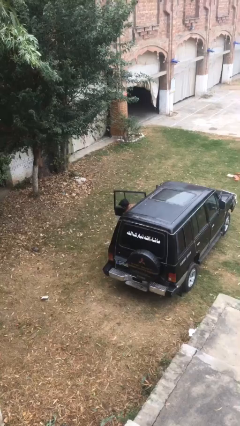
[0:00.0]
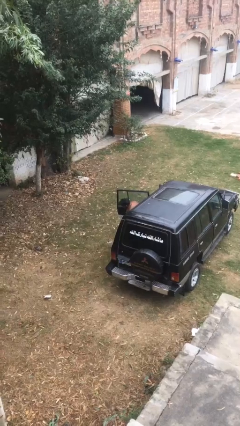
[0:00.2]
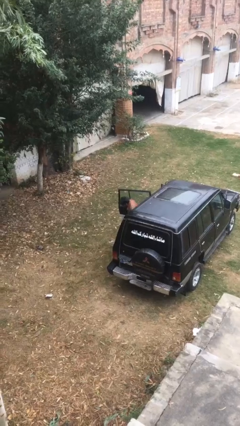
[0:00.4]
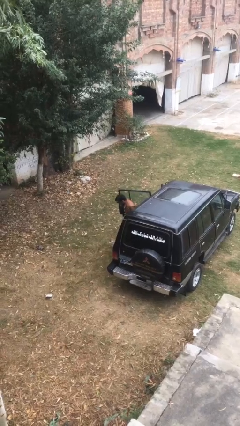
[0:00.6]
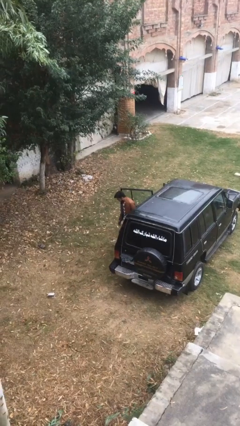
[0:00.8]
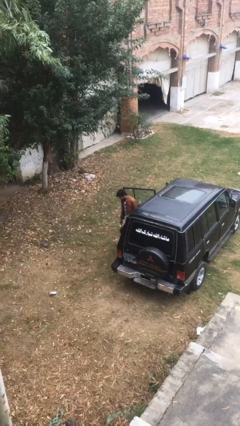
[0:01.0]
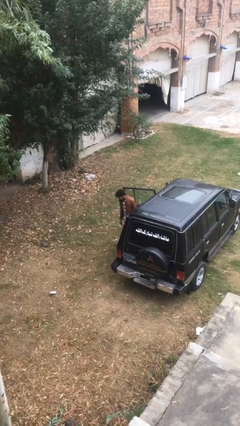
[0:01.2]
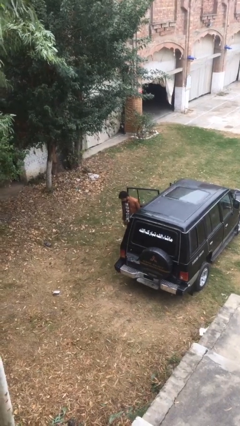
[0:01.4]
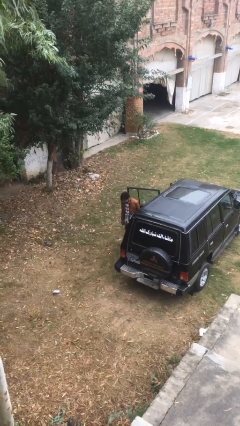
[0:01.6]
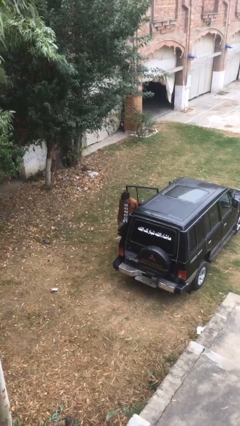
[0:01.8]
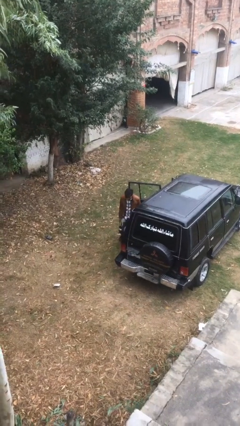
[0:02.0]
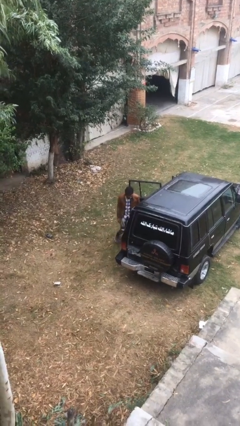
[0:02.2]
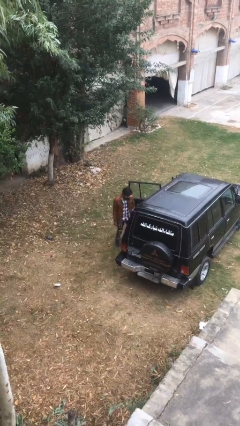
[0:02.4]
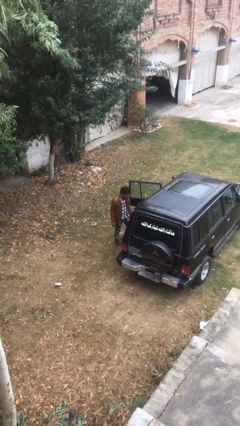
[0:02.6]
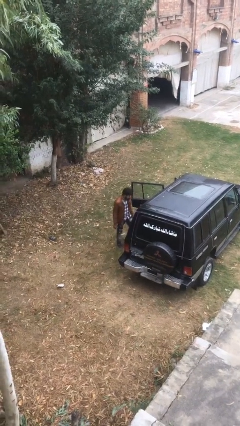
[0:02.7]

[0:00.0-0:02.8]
person exits car

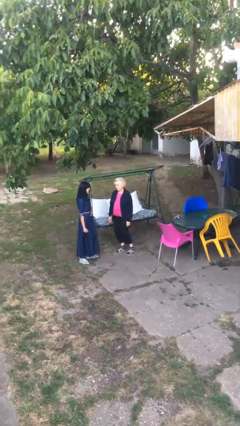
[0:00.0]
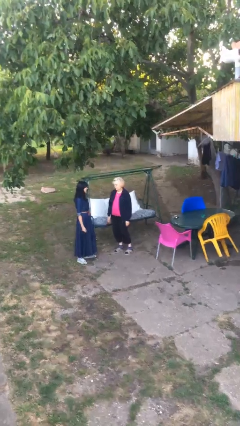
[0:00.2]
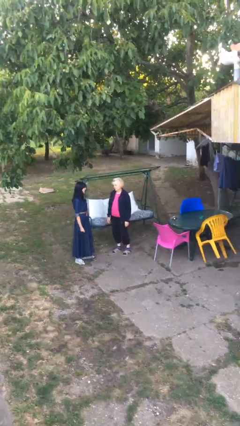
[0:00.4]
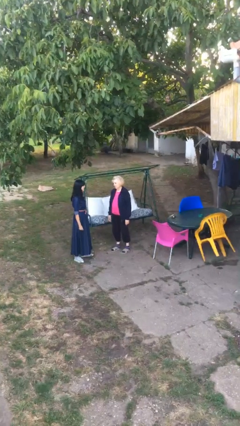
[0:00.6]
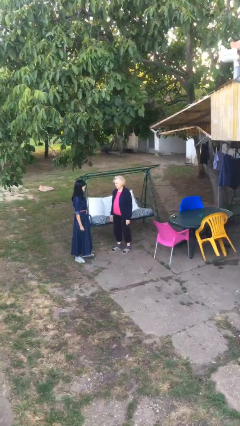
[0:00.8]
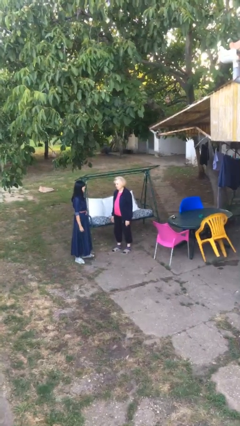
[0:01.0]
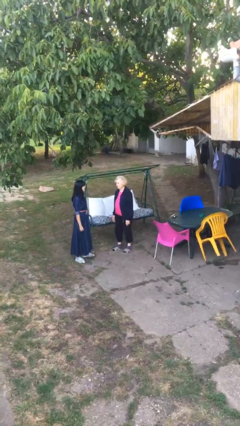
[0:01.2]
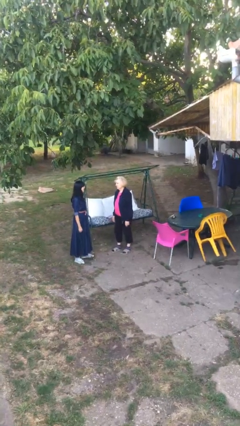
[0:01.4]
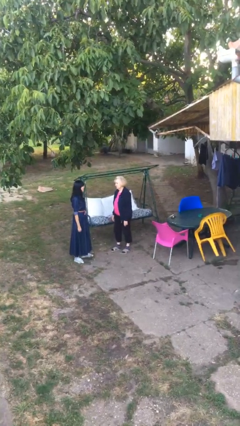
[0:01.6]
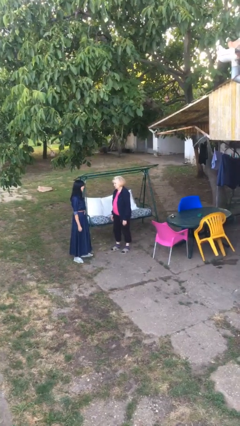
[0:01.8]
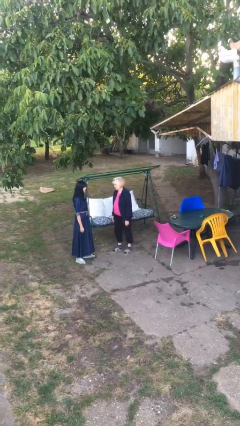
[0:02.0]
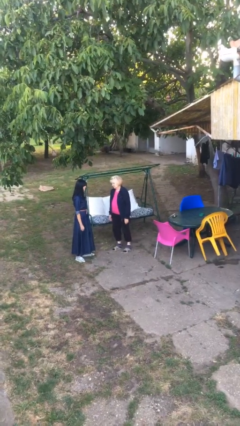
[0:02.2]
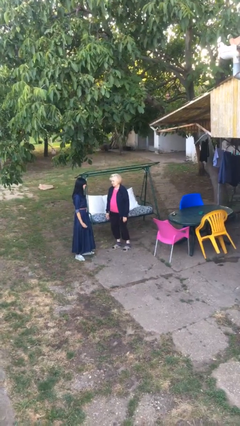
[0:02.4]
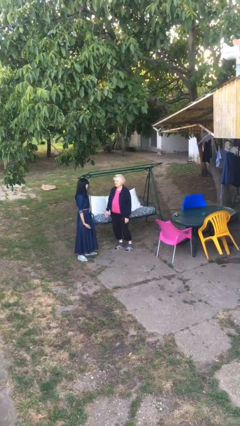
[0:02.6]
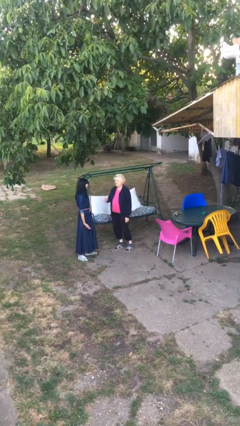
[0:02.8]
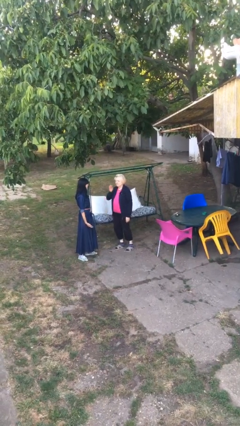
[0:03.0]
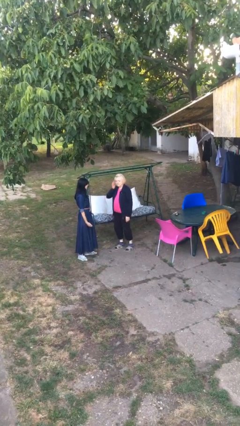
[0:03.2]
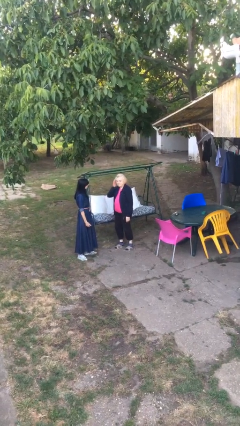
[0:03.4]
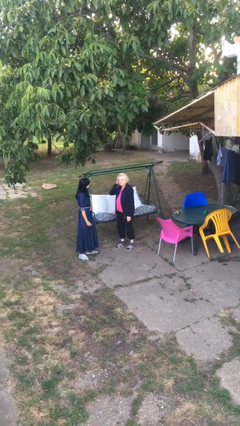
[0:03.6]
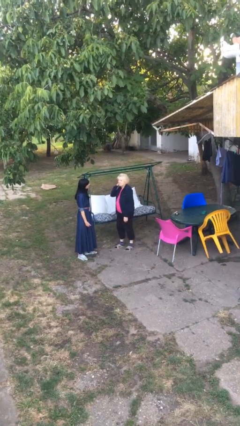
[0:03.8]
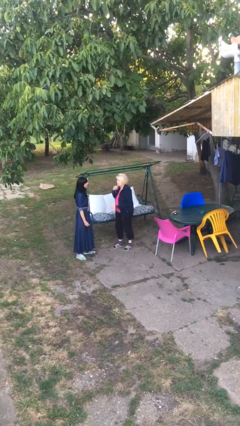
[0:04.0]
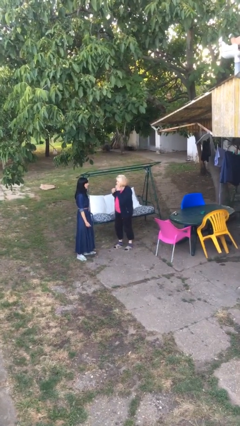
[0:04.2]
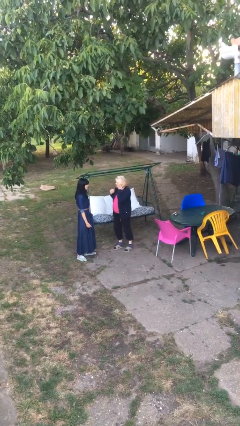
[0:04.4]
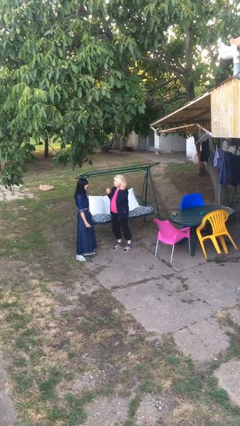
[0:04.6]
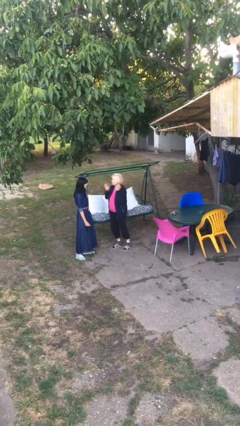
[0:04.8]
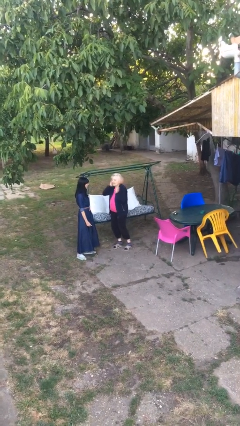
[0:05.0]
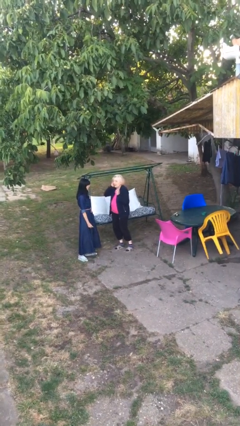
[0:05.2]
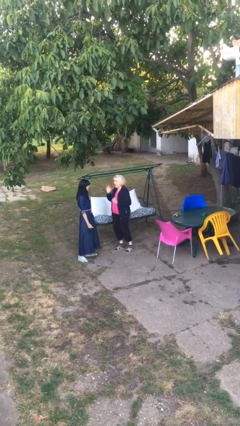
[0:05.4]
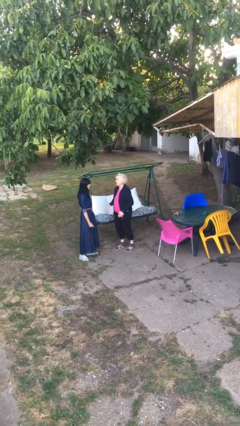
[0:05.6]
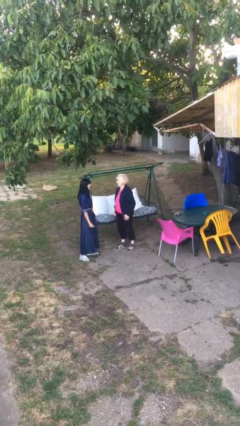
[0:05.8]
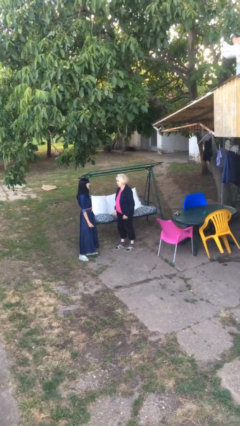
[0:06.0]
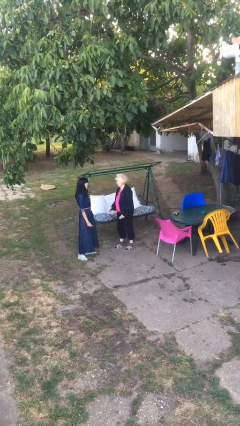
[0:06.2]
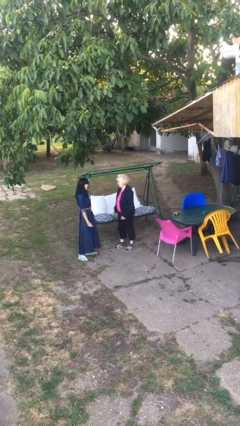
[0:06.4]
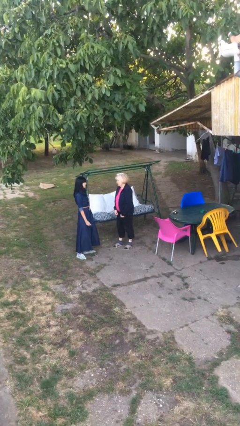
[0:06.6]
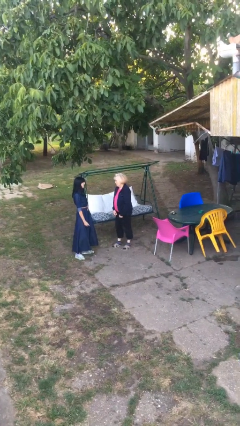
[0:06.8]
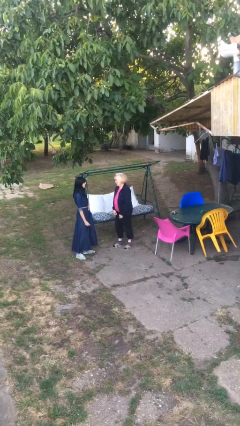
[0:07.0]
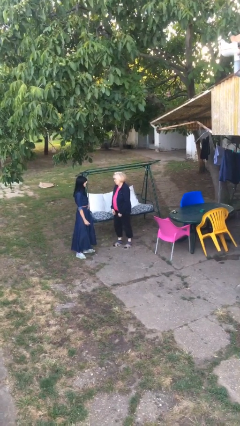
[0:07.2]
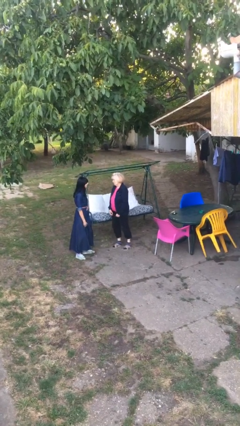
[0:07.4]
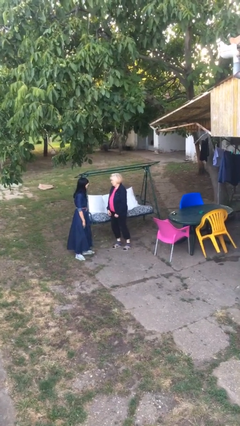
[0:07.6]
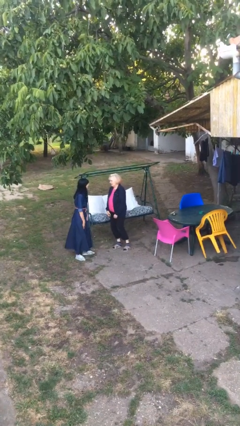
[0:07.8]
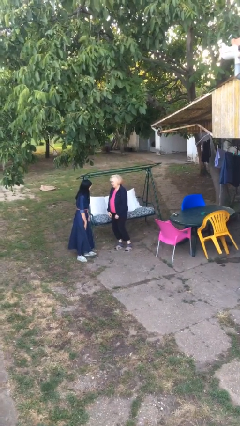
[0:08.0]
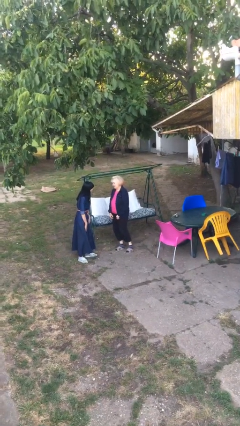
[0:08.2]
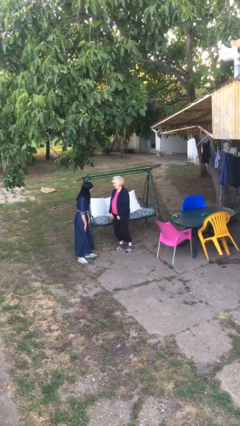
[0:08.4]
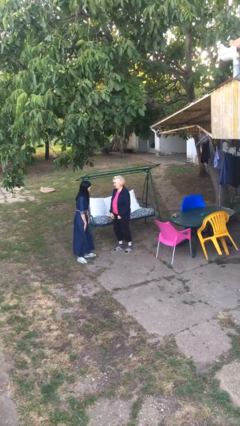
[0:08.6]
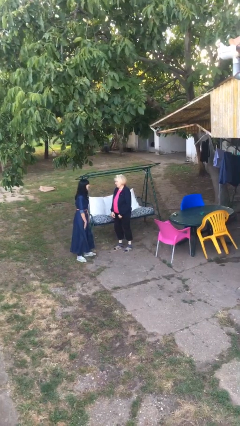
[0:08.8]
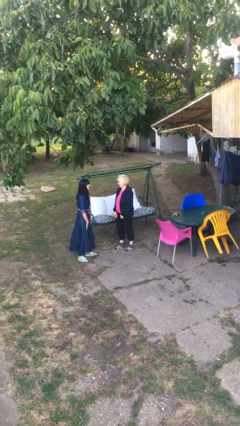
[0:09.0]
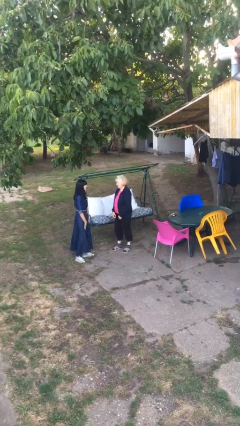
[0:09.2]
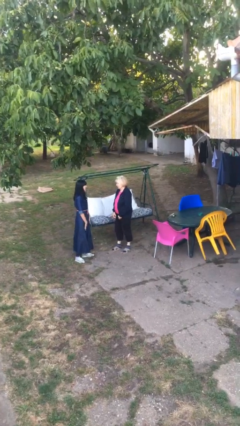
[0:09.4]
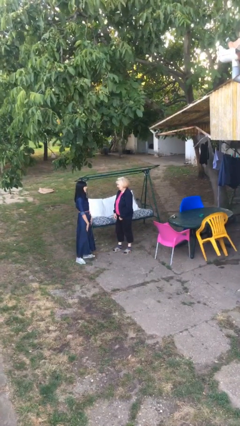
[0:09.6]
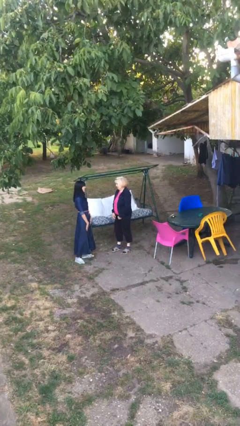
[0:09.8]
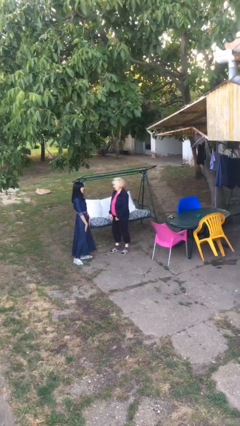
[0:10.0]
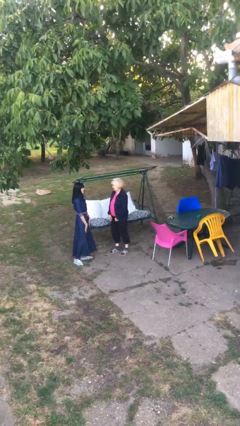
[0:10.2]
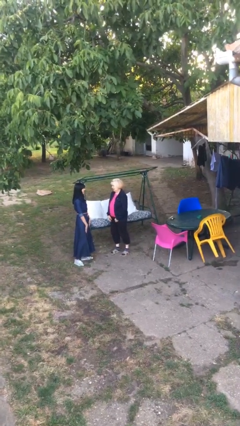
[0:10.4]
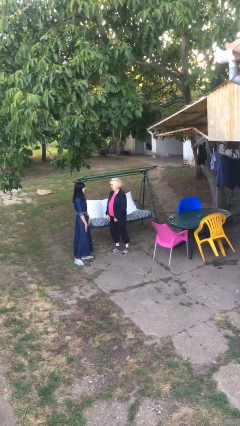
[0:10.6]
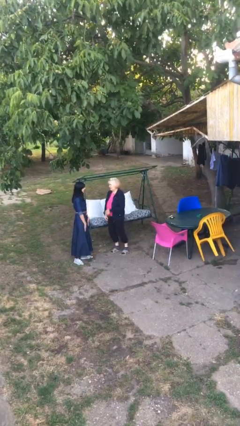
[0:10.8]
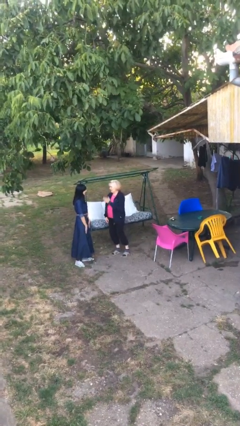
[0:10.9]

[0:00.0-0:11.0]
person talks to person

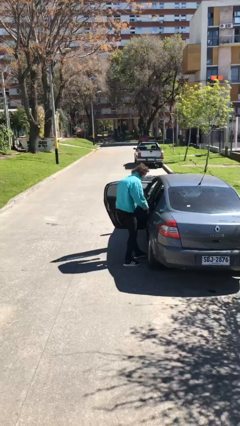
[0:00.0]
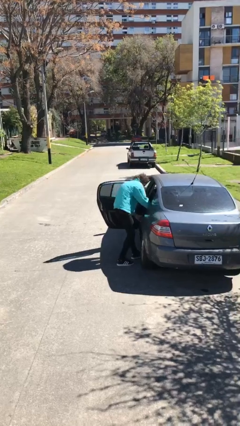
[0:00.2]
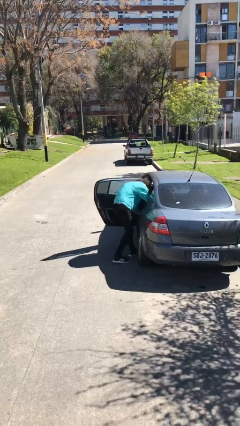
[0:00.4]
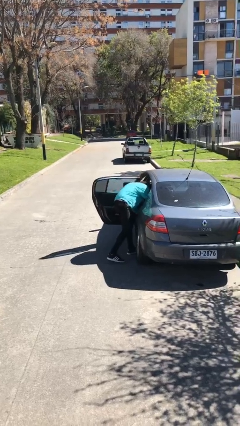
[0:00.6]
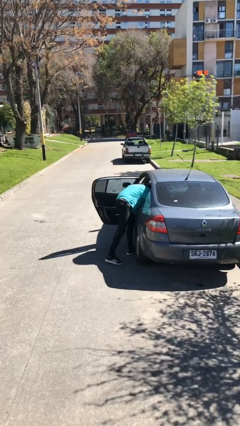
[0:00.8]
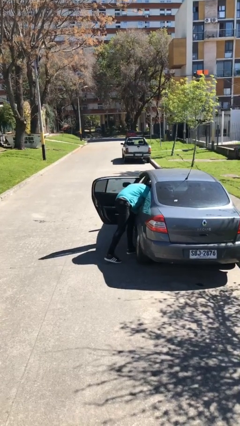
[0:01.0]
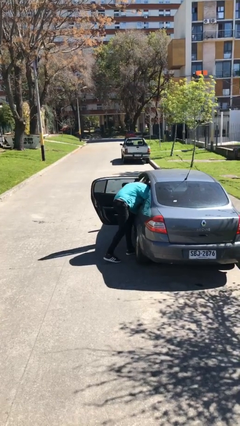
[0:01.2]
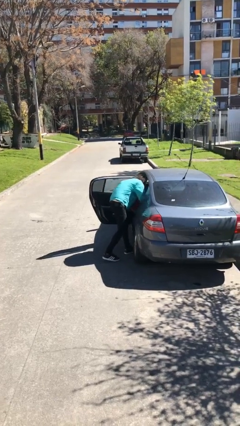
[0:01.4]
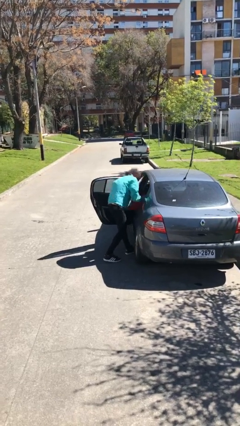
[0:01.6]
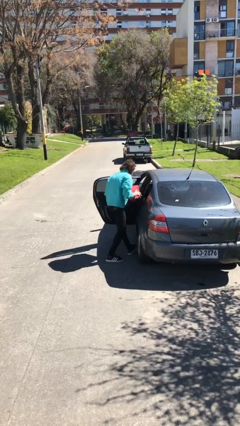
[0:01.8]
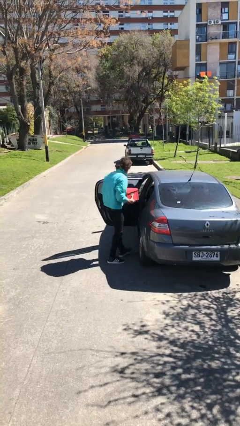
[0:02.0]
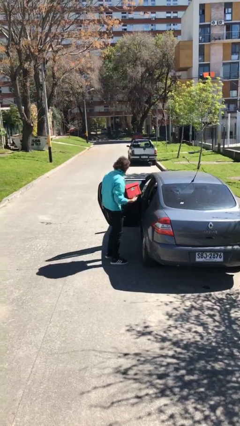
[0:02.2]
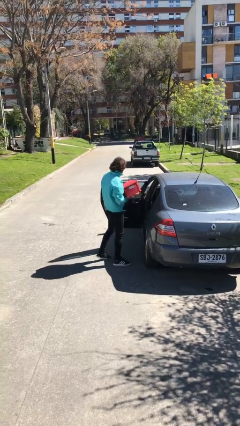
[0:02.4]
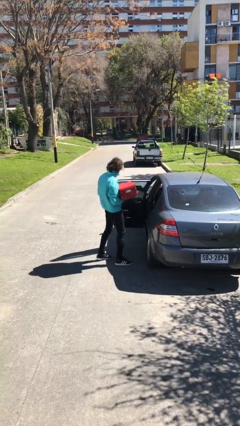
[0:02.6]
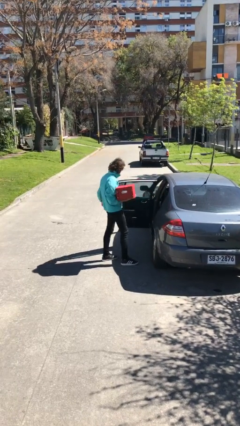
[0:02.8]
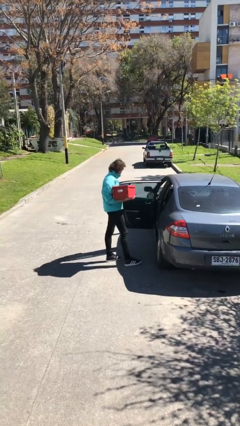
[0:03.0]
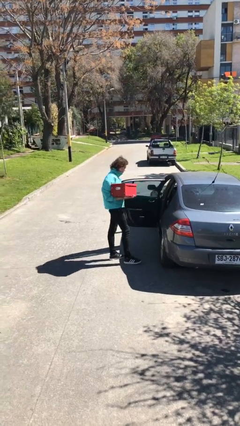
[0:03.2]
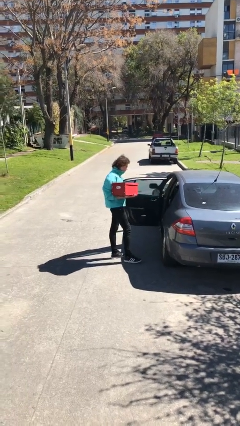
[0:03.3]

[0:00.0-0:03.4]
person unloads car

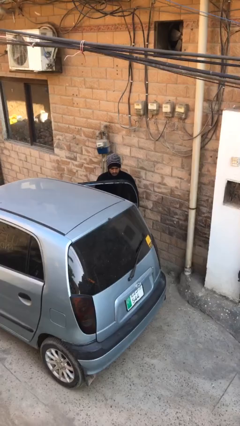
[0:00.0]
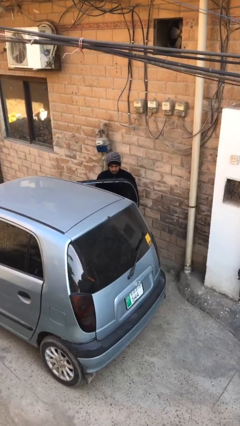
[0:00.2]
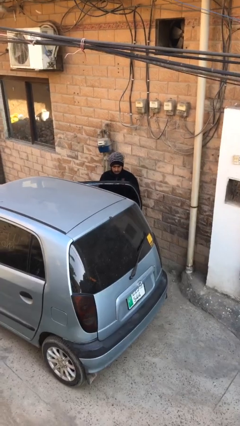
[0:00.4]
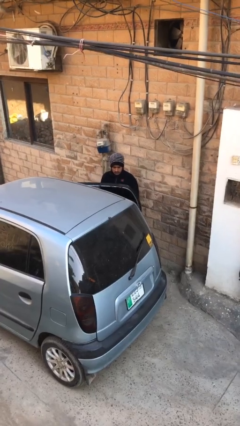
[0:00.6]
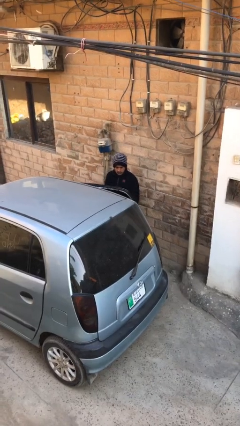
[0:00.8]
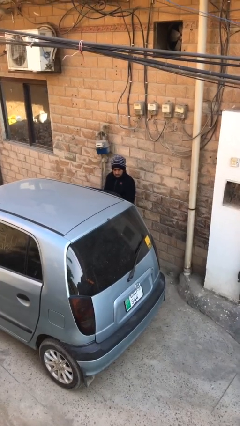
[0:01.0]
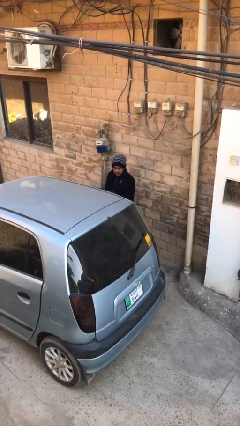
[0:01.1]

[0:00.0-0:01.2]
person closes car door
